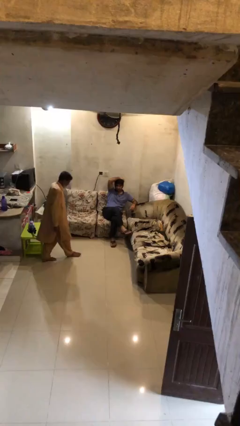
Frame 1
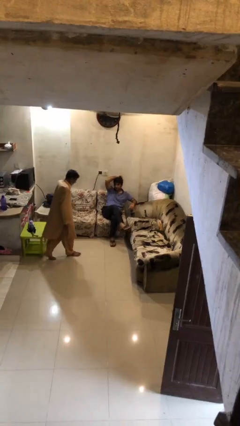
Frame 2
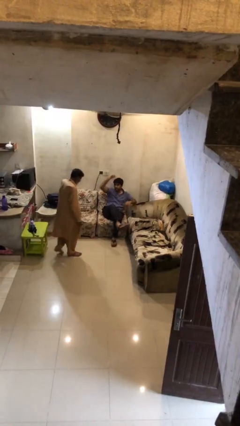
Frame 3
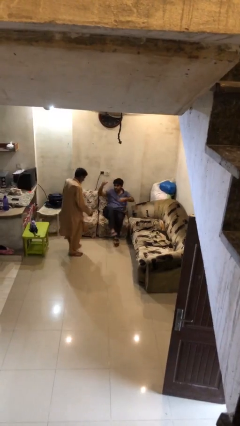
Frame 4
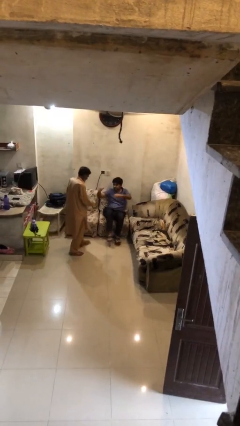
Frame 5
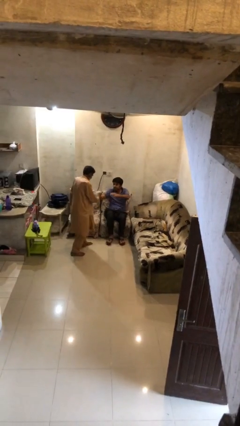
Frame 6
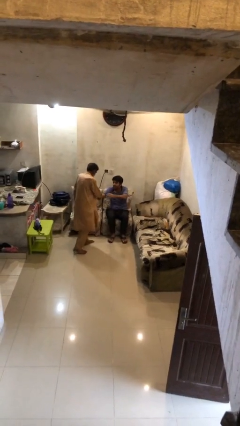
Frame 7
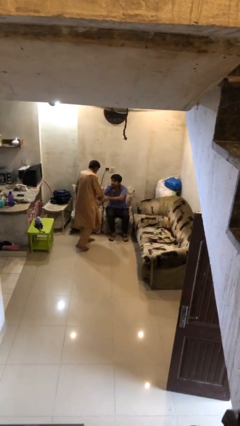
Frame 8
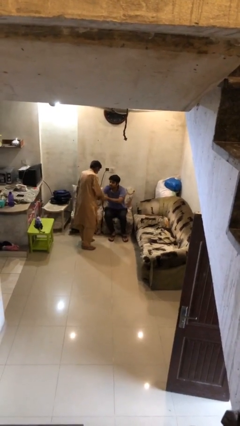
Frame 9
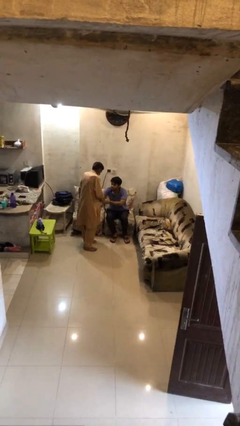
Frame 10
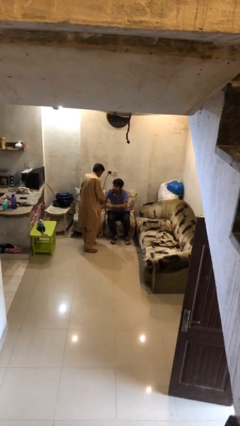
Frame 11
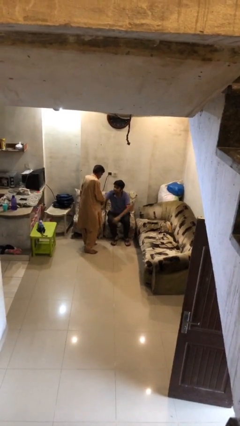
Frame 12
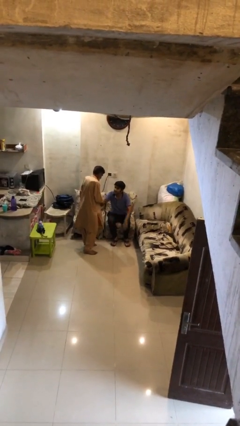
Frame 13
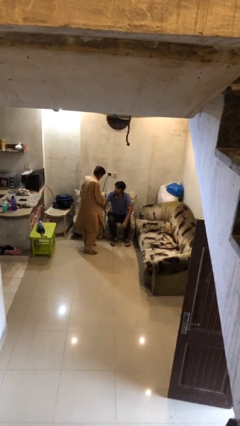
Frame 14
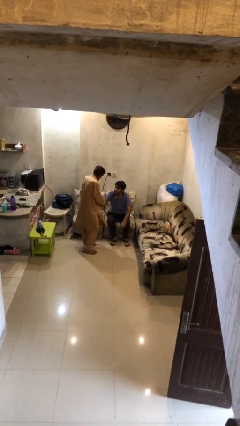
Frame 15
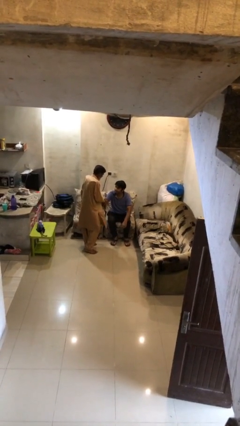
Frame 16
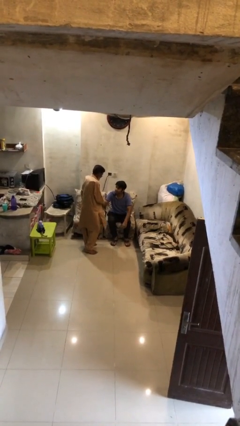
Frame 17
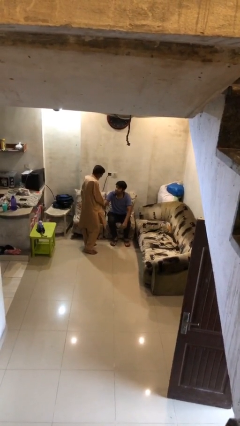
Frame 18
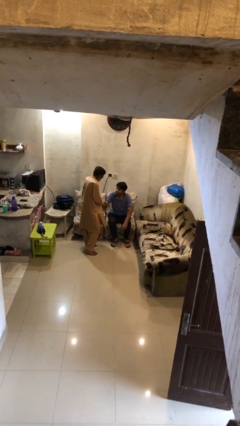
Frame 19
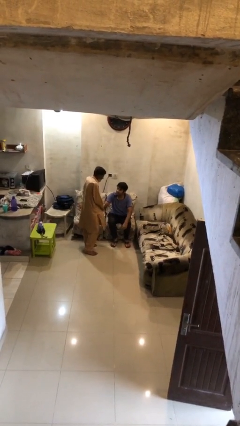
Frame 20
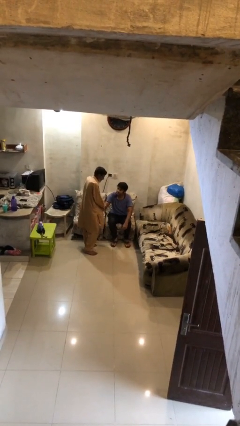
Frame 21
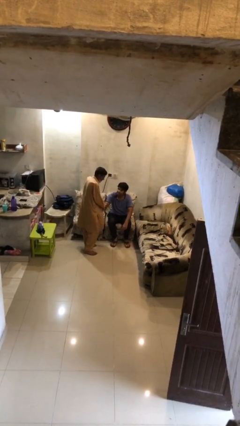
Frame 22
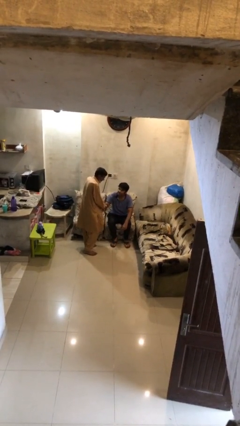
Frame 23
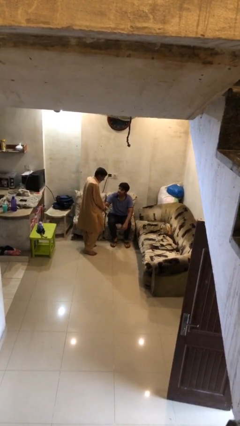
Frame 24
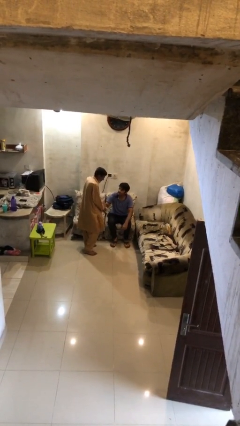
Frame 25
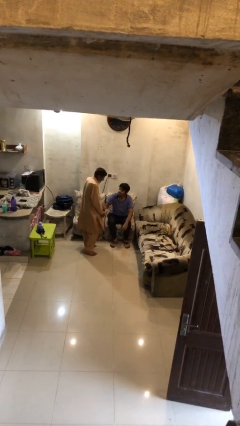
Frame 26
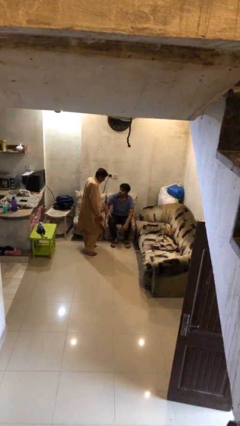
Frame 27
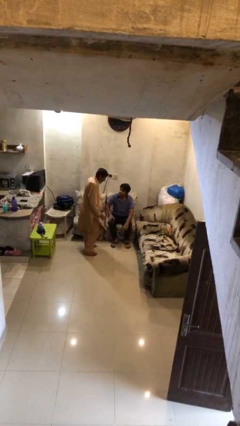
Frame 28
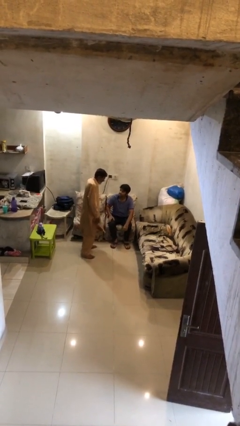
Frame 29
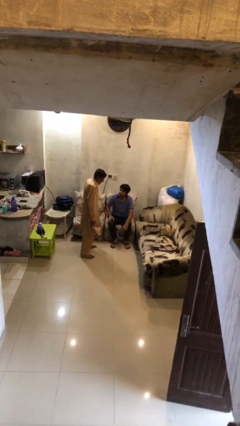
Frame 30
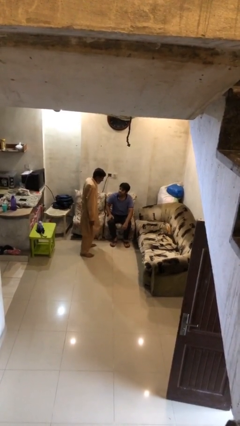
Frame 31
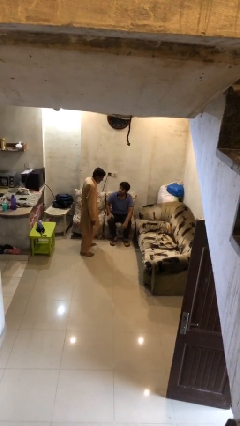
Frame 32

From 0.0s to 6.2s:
person shakes hand

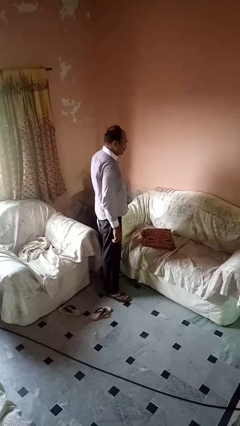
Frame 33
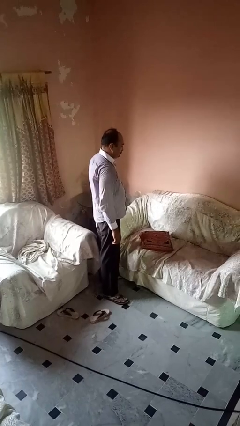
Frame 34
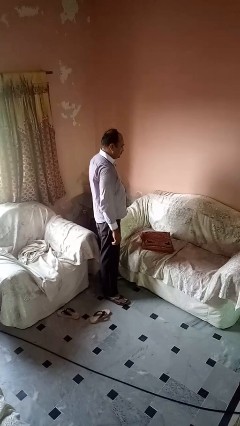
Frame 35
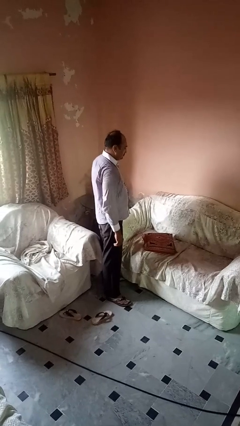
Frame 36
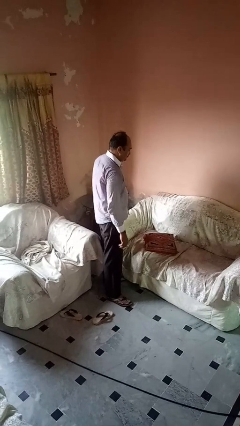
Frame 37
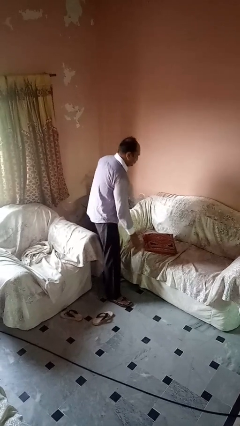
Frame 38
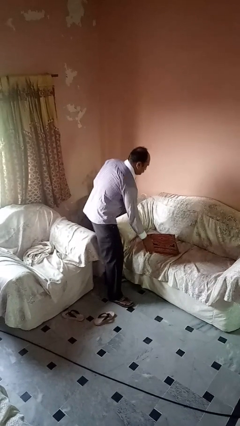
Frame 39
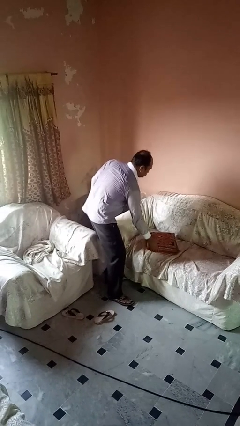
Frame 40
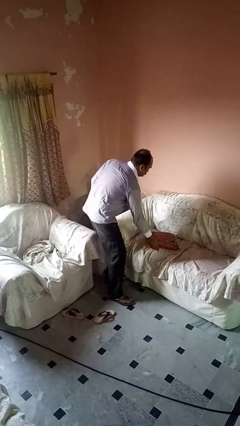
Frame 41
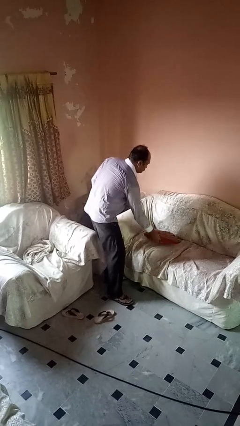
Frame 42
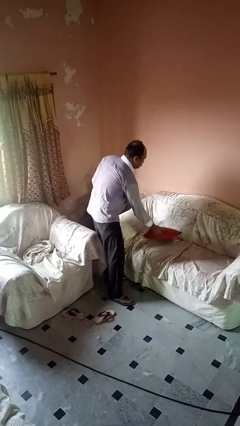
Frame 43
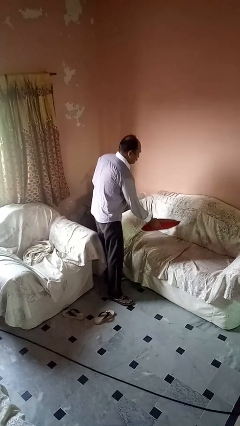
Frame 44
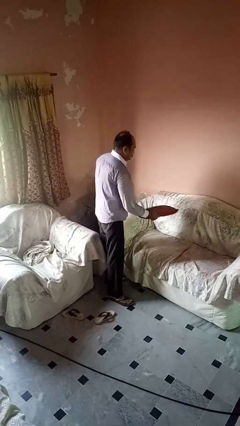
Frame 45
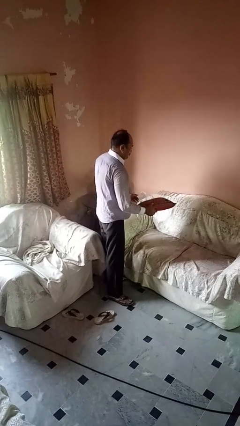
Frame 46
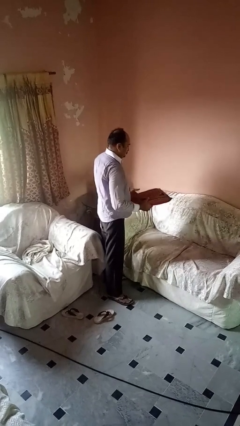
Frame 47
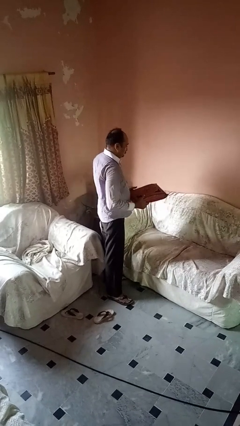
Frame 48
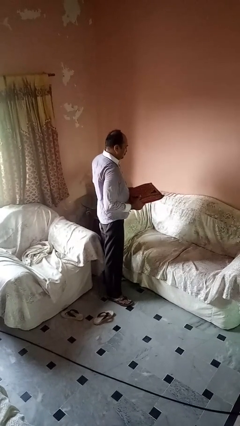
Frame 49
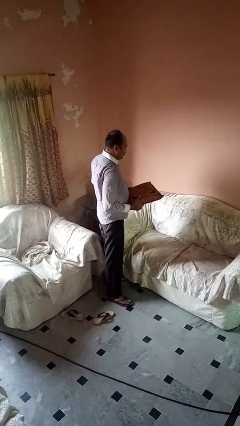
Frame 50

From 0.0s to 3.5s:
person picks up object from couch

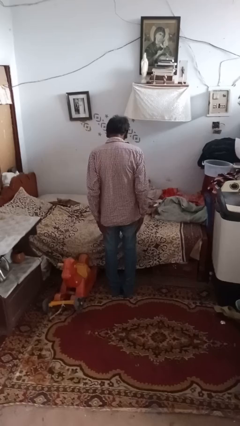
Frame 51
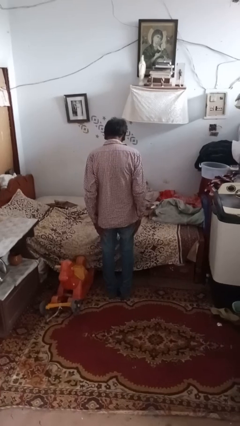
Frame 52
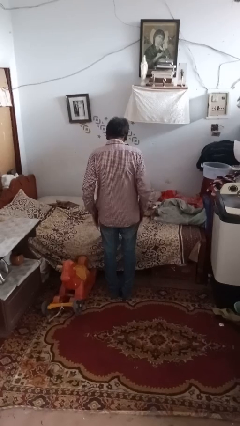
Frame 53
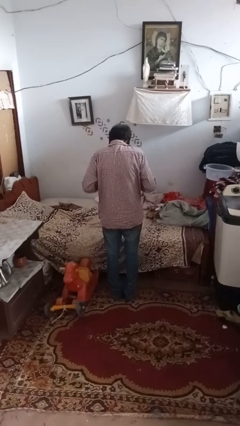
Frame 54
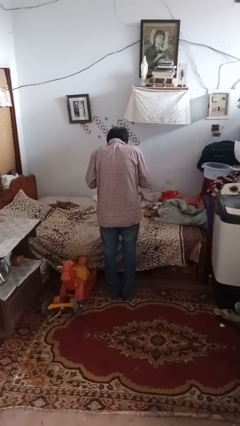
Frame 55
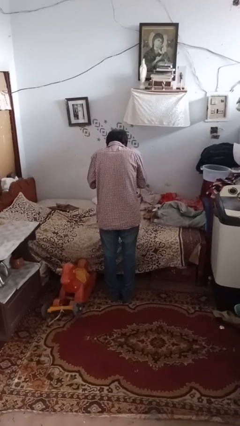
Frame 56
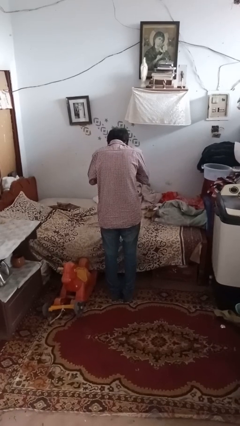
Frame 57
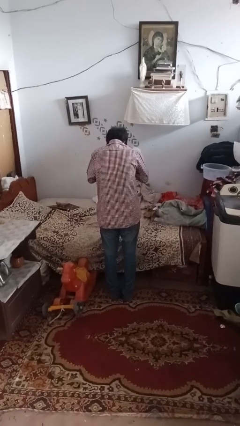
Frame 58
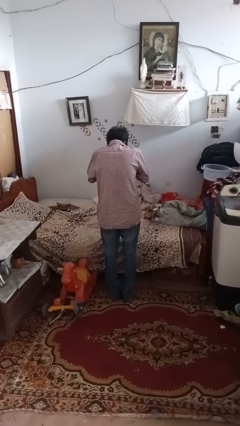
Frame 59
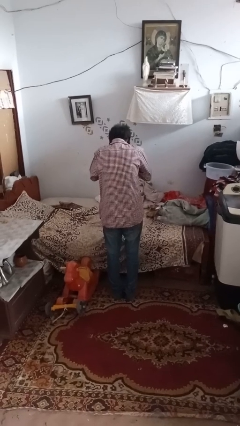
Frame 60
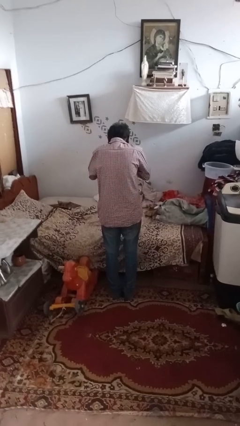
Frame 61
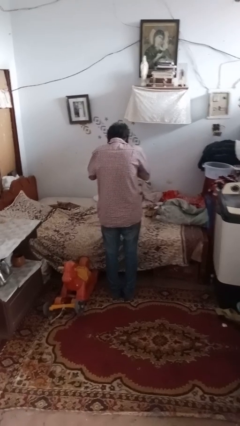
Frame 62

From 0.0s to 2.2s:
person sneezes into hand

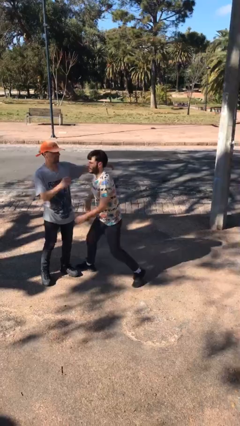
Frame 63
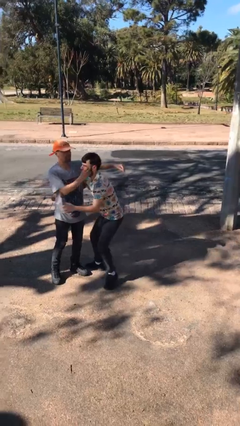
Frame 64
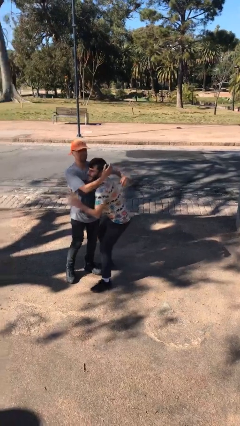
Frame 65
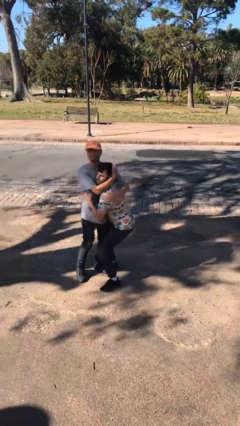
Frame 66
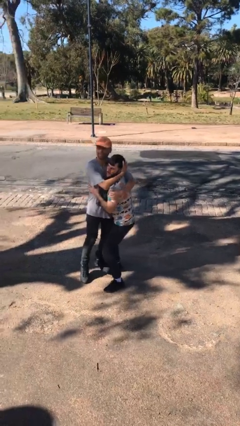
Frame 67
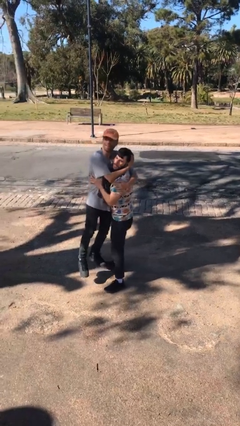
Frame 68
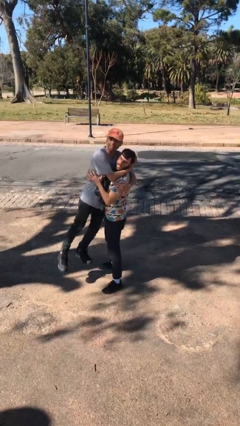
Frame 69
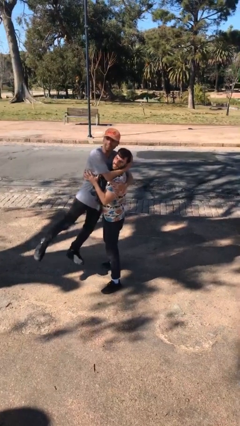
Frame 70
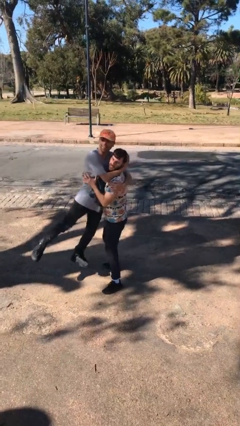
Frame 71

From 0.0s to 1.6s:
person picks up person

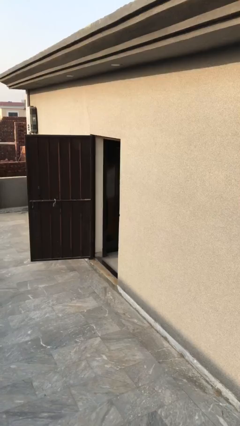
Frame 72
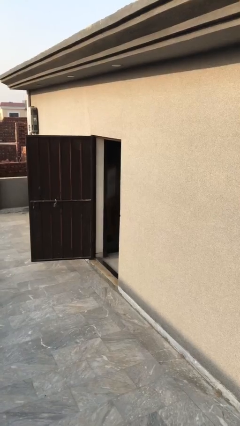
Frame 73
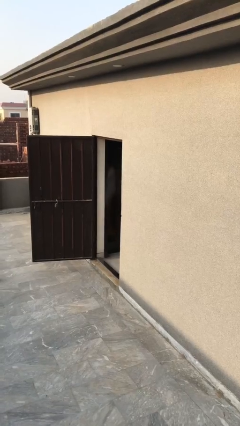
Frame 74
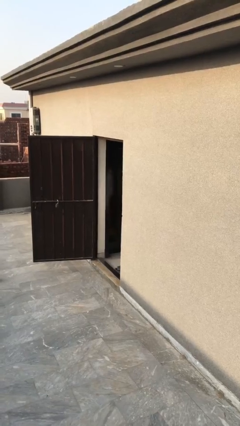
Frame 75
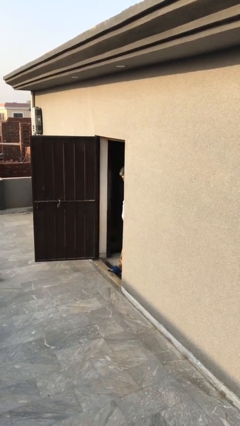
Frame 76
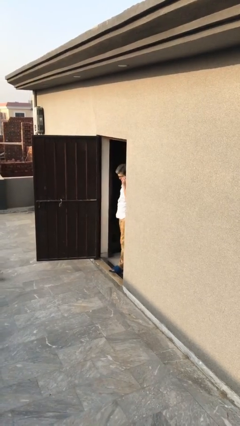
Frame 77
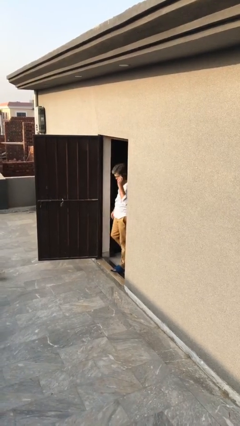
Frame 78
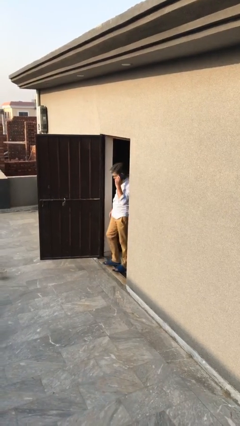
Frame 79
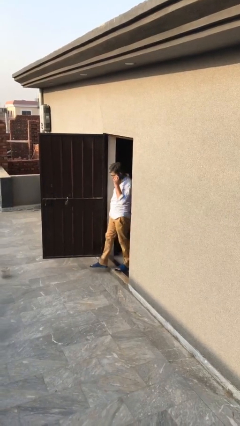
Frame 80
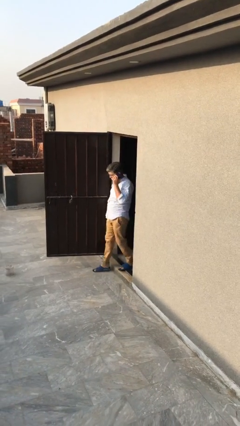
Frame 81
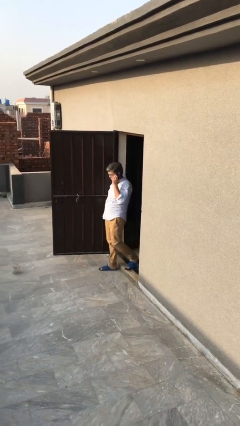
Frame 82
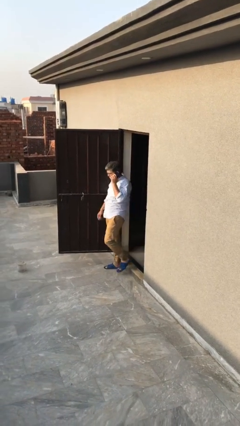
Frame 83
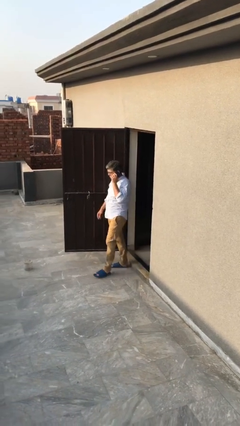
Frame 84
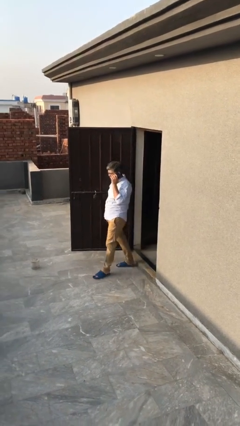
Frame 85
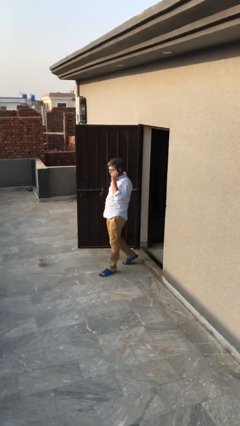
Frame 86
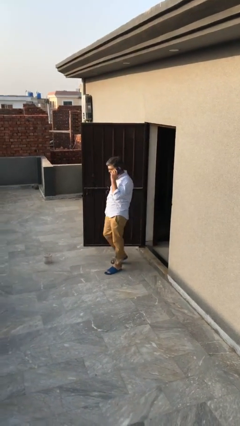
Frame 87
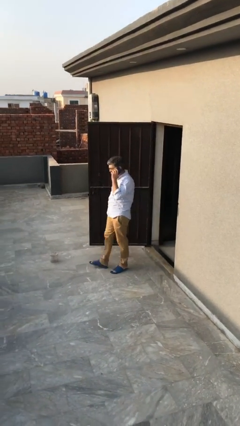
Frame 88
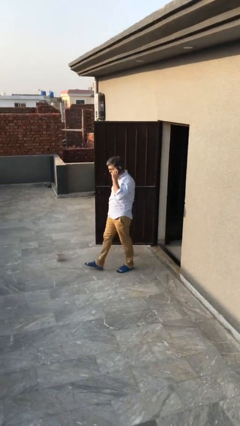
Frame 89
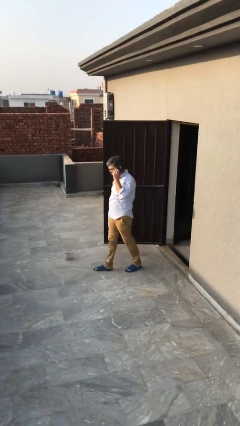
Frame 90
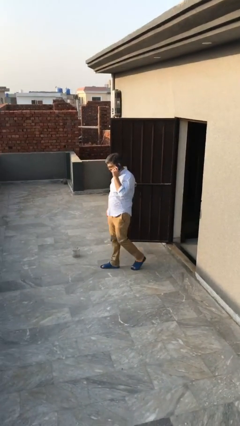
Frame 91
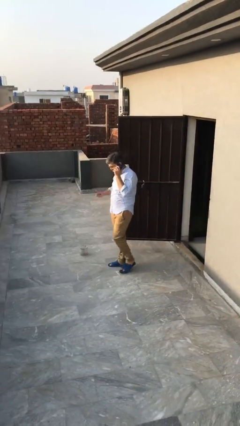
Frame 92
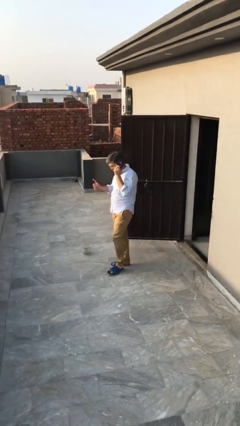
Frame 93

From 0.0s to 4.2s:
person enters scene through structure
